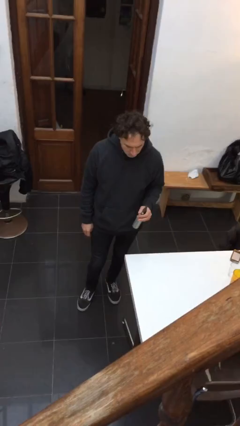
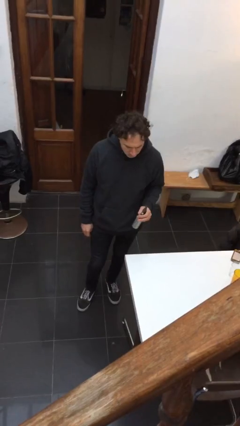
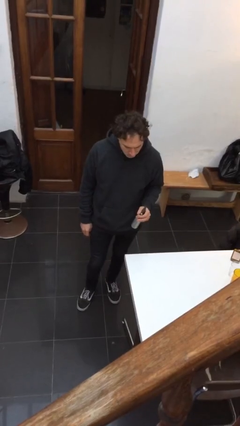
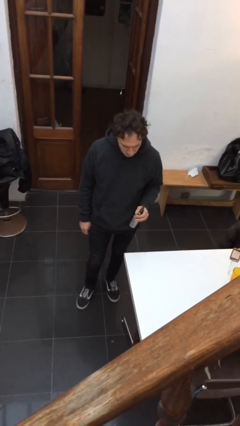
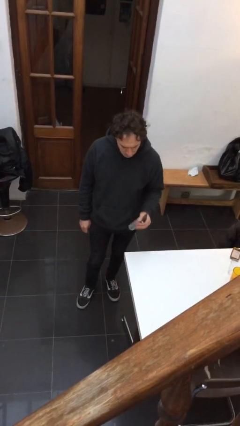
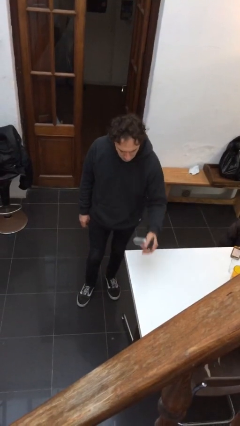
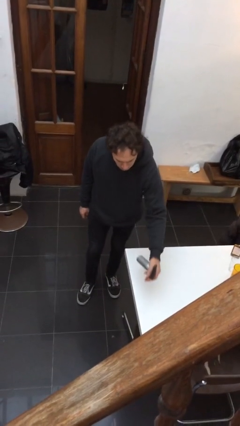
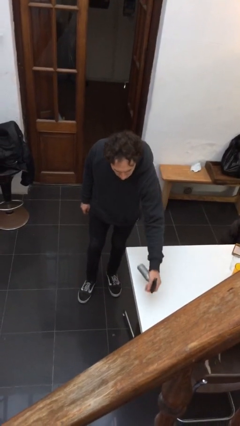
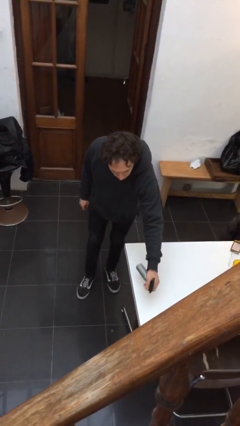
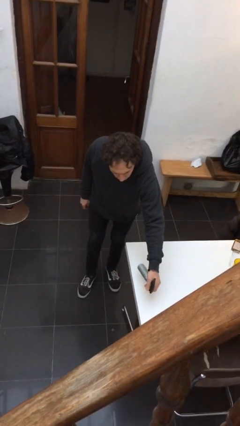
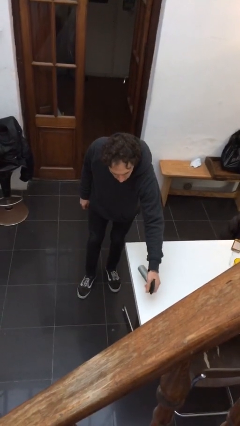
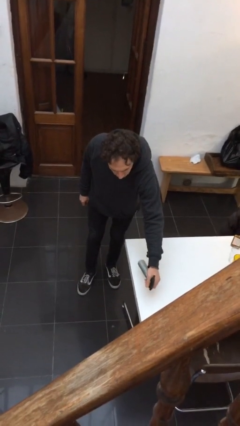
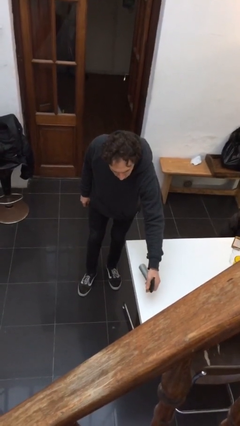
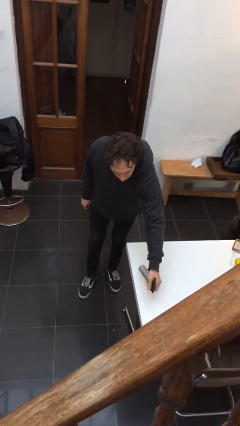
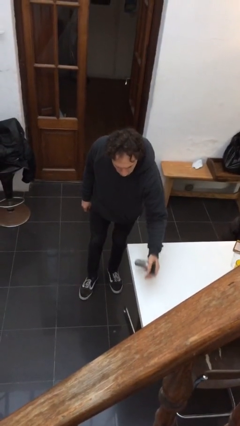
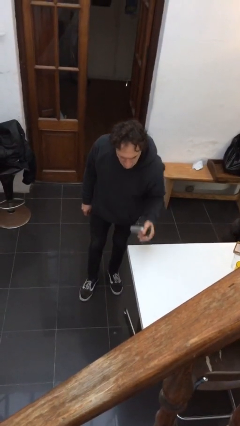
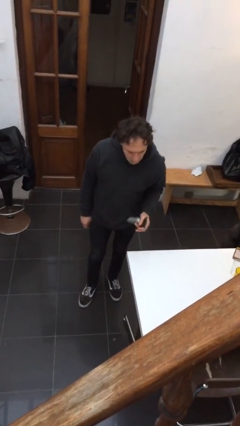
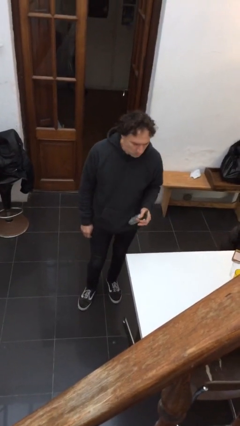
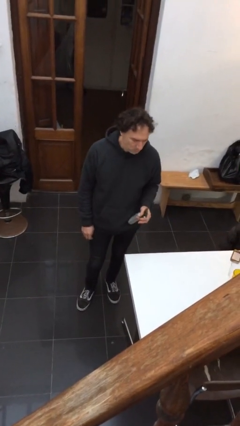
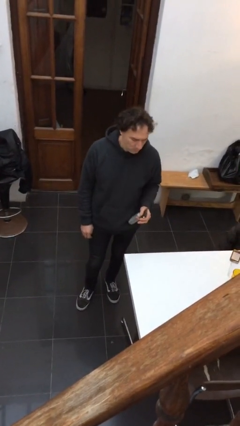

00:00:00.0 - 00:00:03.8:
person sprays from bottle

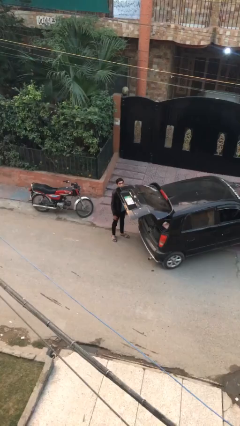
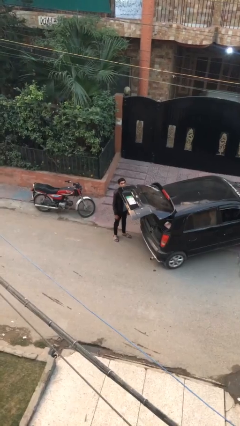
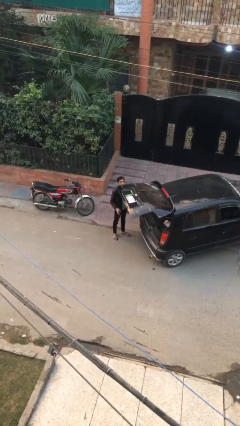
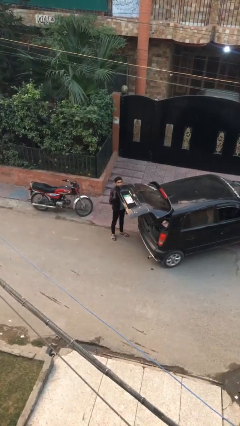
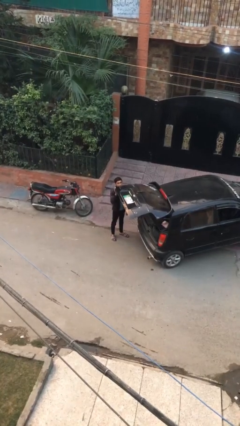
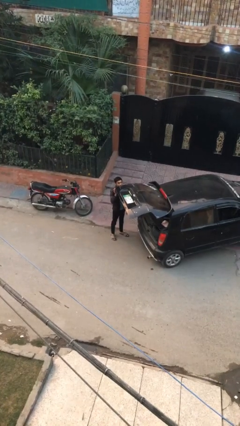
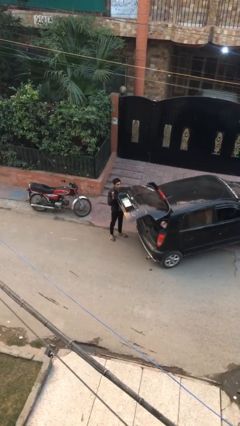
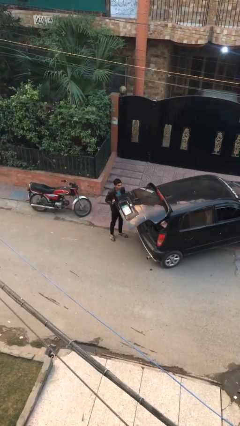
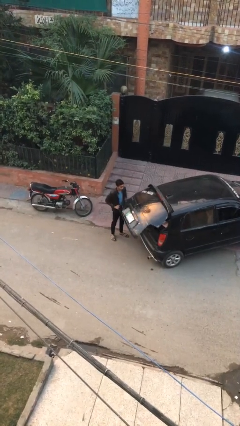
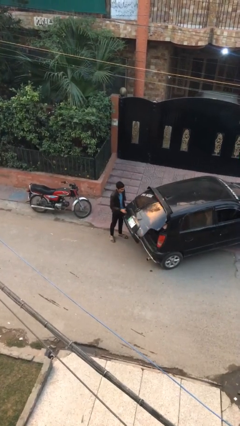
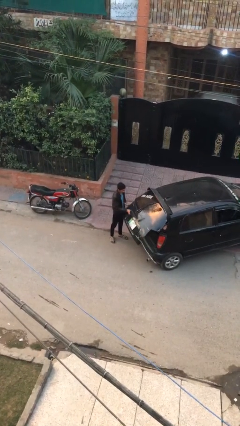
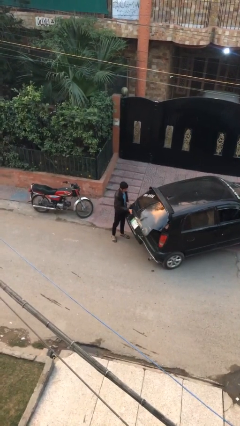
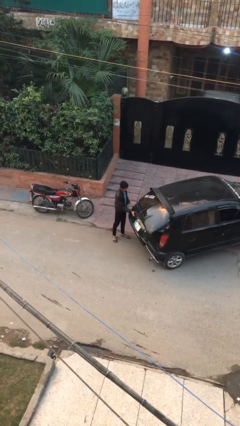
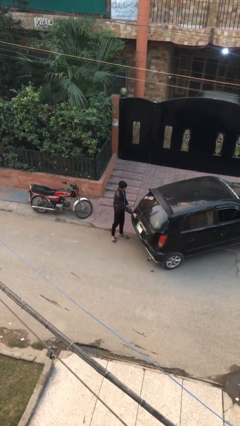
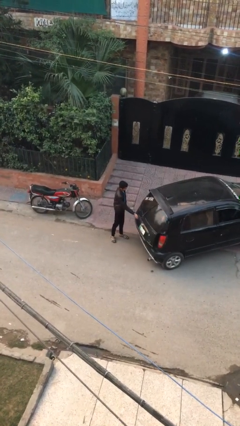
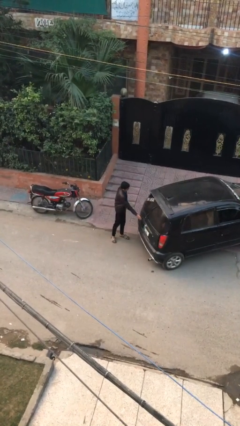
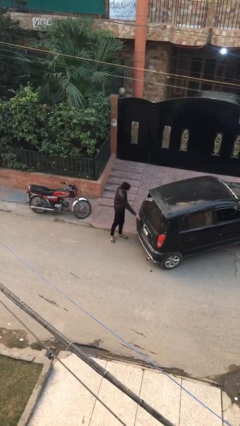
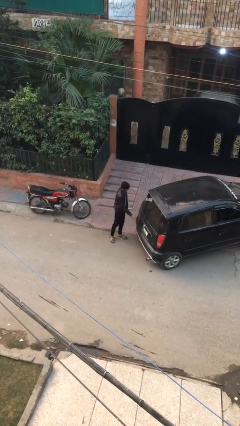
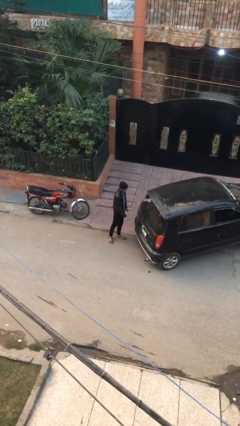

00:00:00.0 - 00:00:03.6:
person closes car trunk

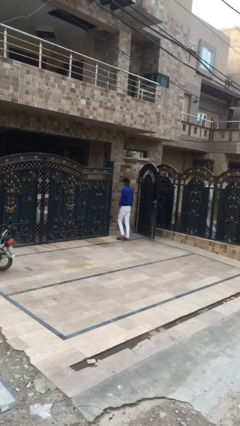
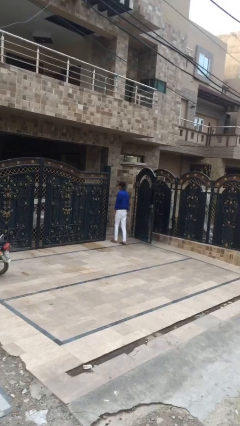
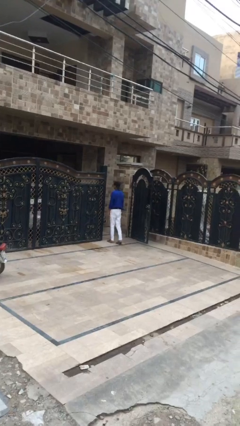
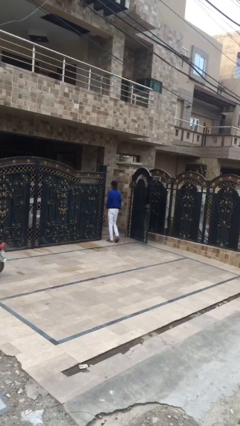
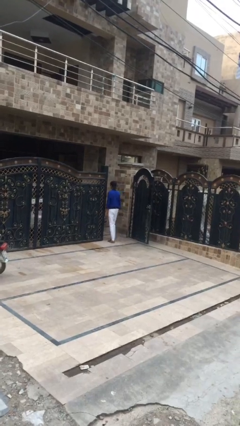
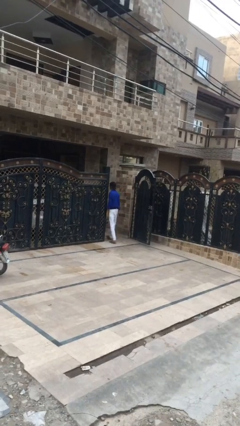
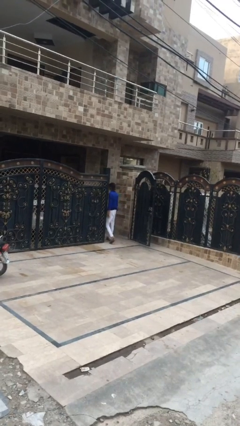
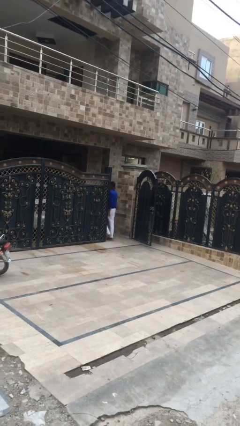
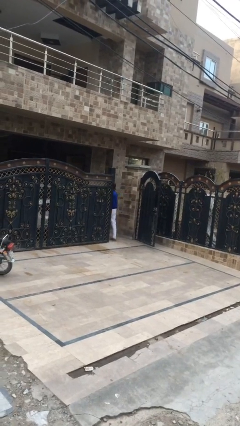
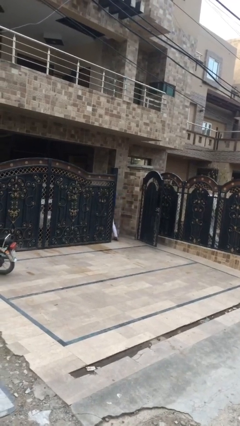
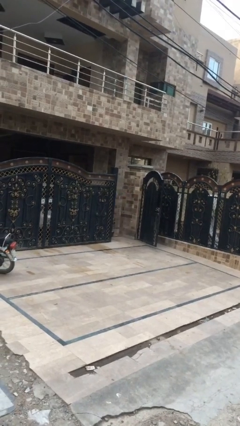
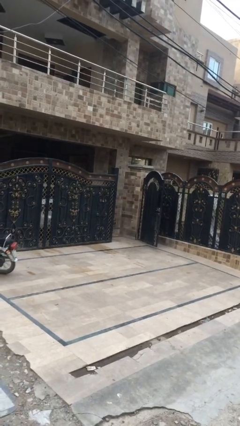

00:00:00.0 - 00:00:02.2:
person exits scene through structure

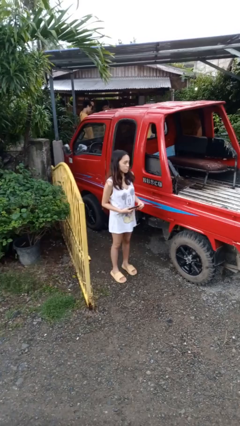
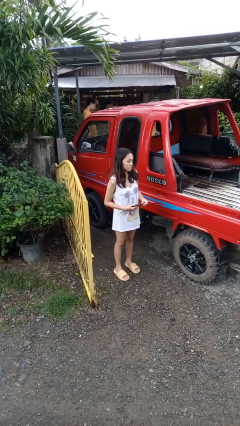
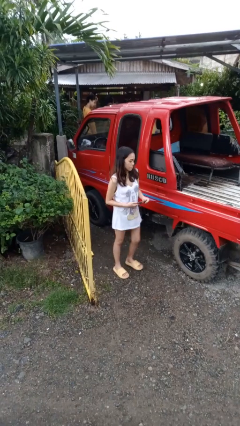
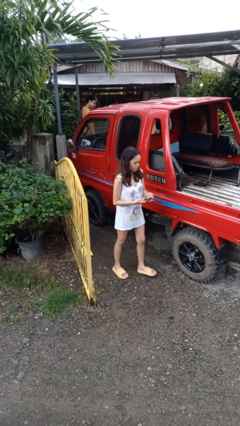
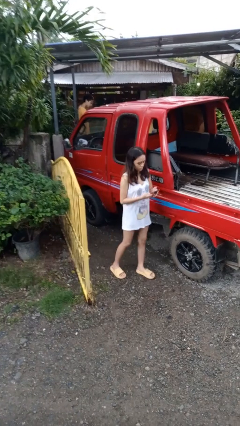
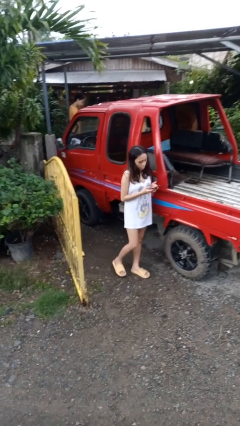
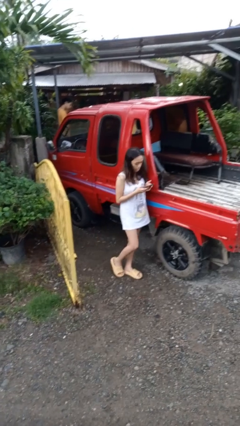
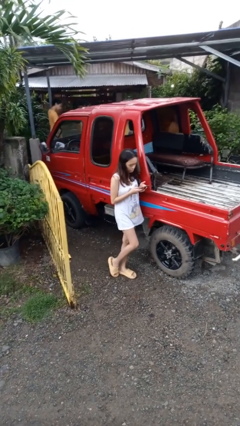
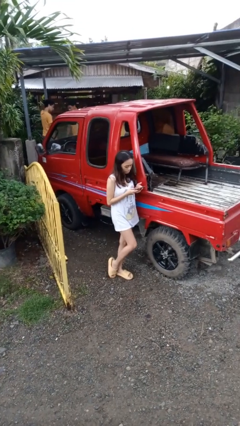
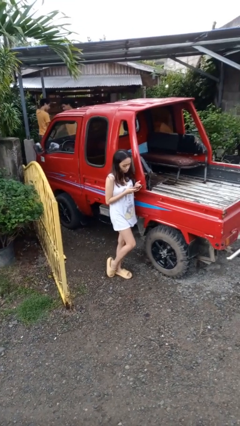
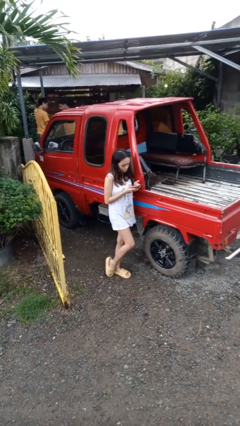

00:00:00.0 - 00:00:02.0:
person leans against car

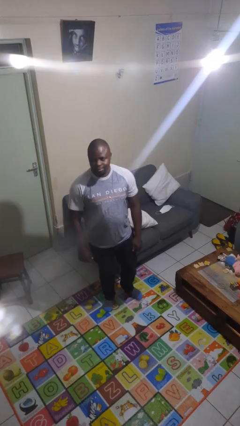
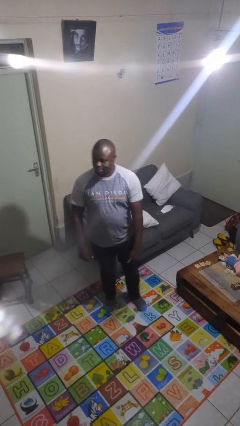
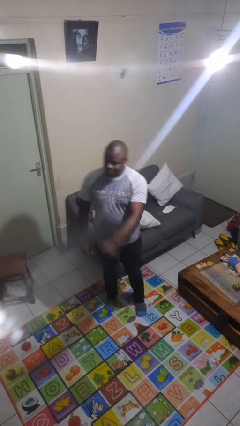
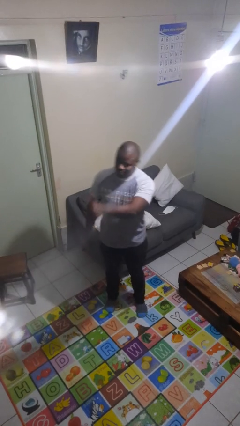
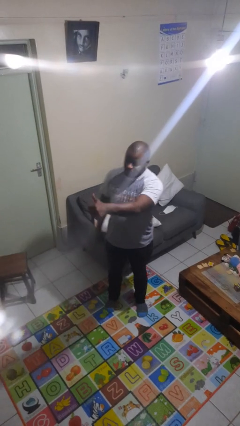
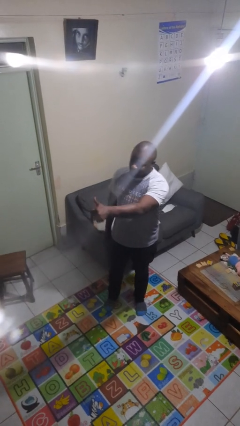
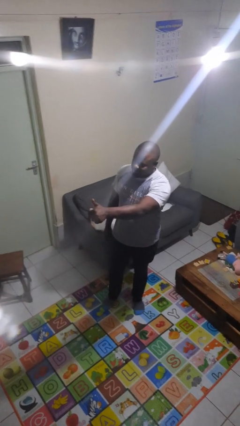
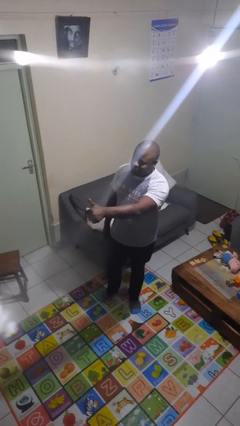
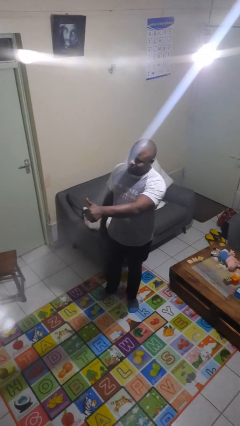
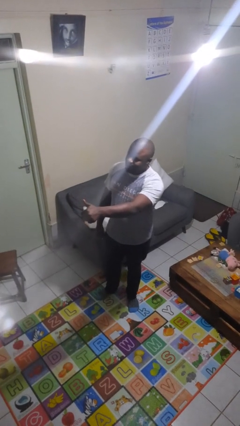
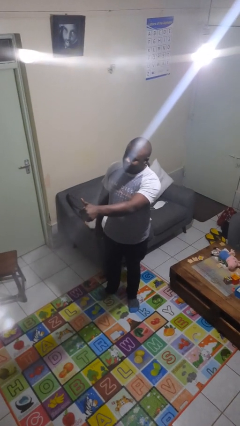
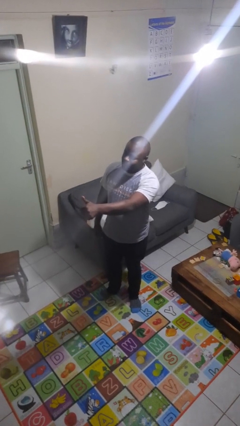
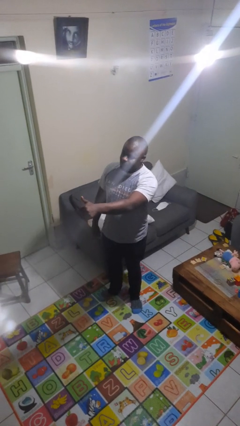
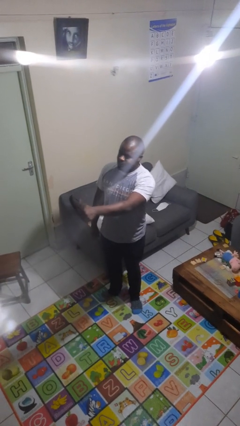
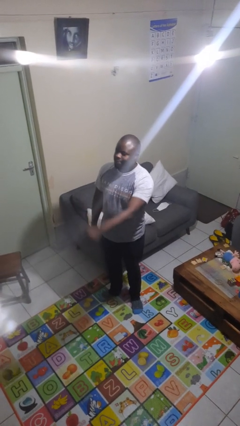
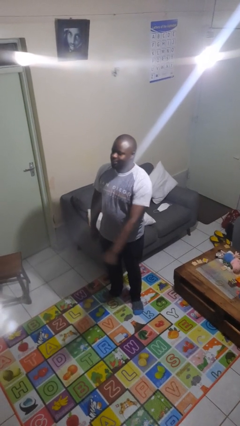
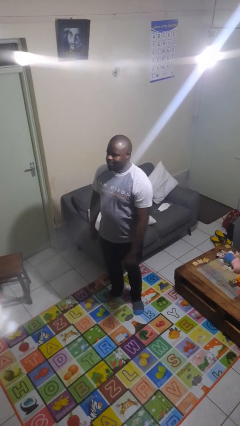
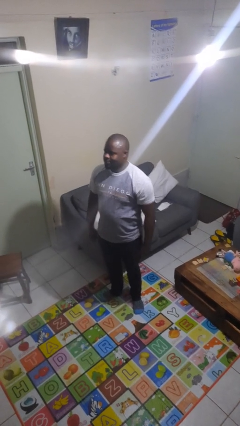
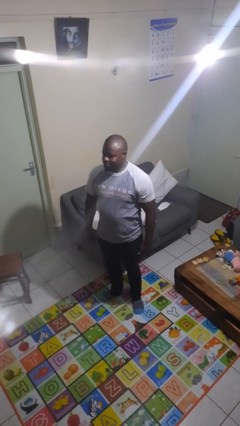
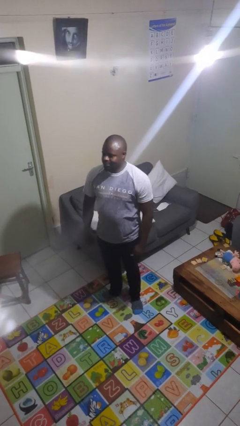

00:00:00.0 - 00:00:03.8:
person gestures thumbs up

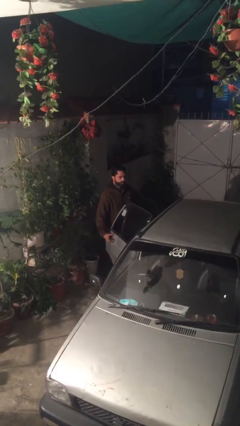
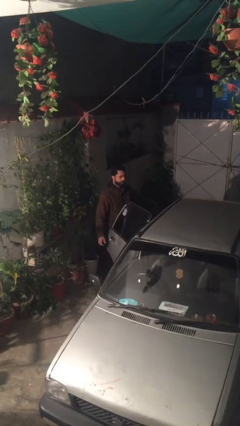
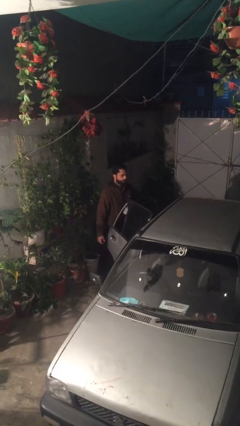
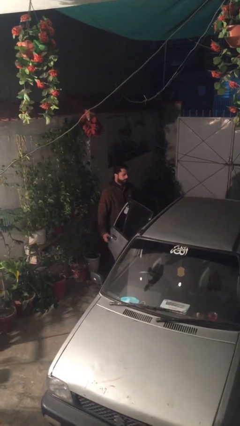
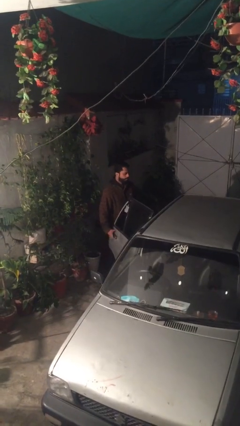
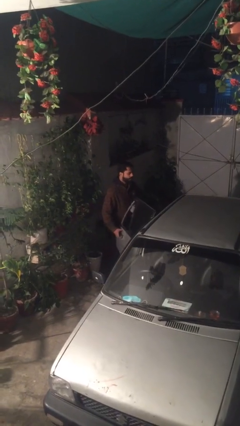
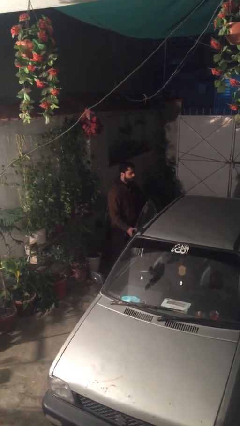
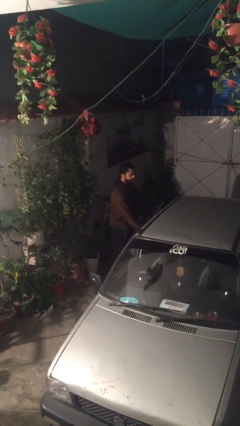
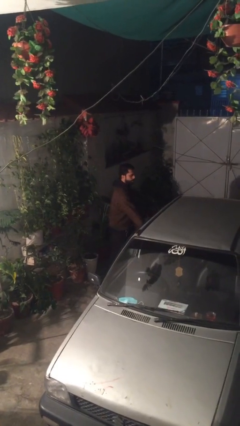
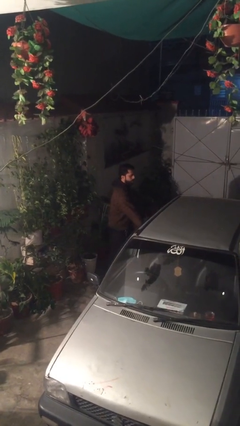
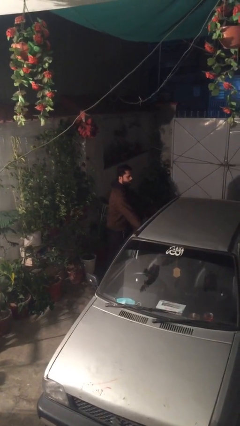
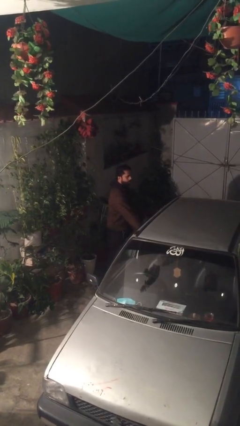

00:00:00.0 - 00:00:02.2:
person closes car door
